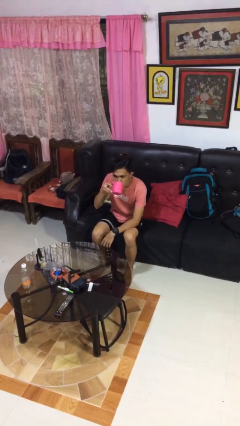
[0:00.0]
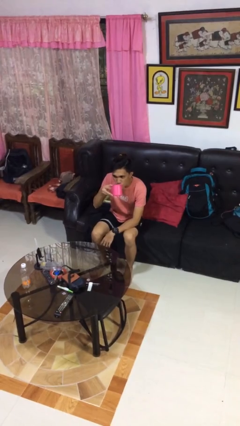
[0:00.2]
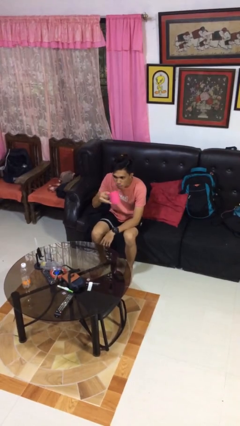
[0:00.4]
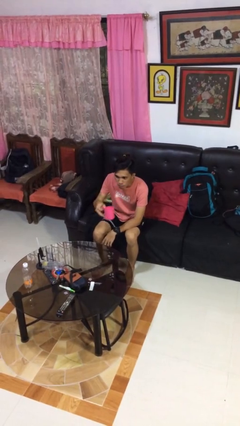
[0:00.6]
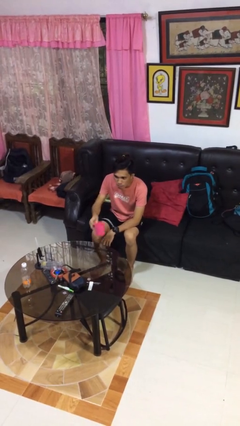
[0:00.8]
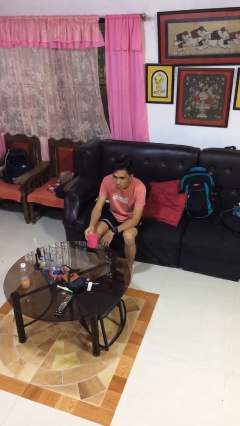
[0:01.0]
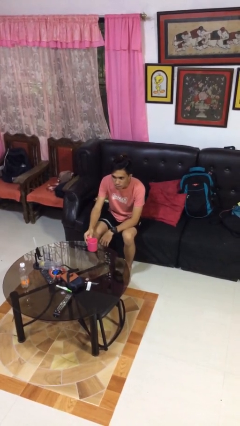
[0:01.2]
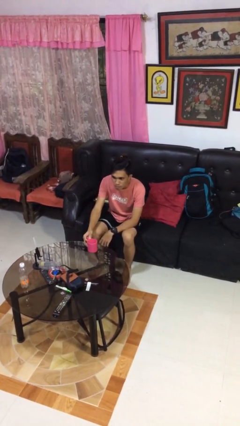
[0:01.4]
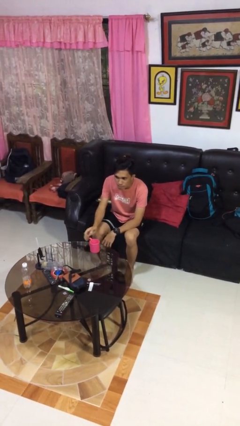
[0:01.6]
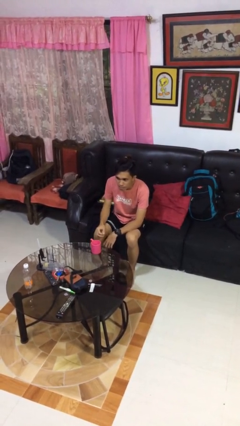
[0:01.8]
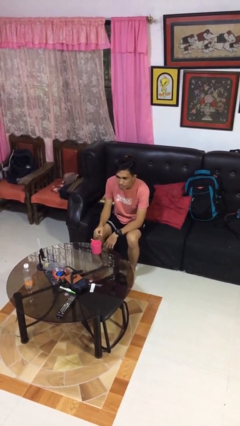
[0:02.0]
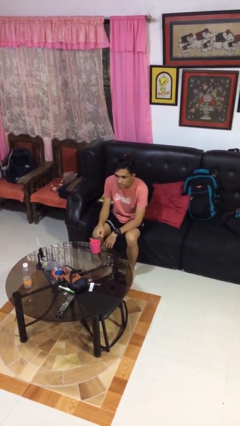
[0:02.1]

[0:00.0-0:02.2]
person puts down object on table

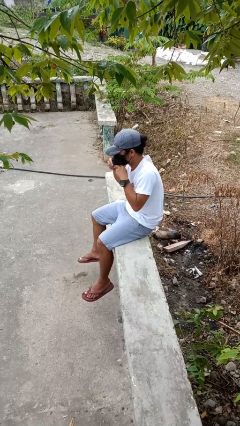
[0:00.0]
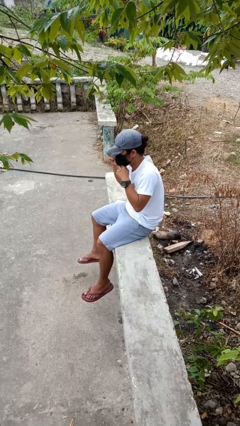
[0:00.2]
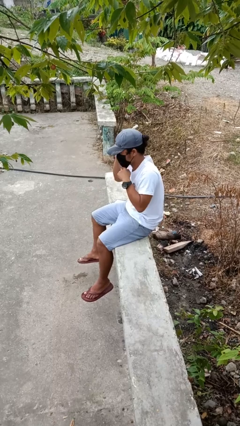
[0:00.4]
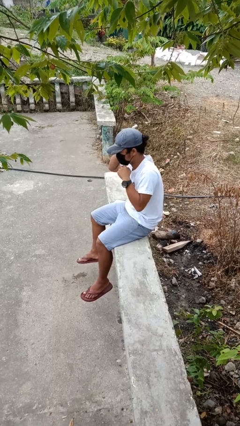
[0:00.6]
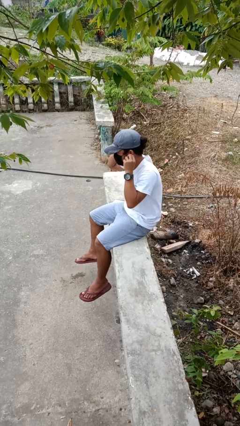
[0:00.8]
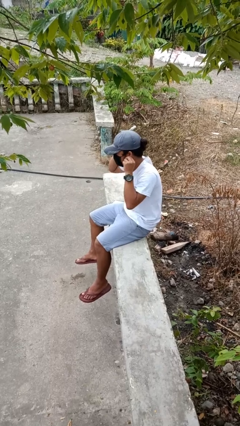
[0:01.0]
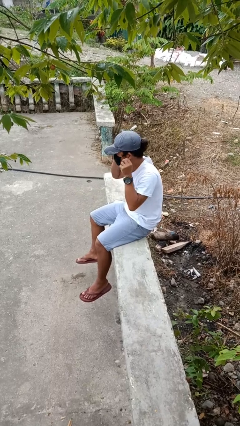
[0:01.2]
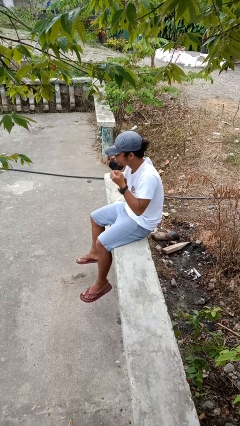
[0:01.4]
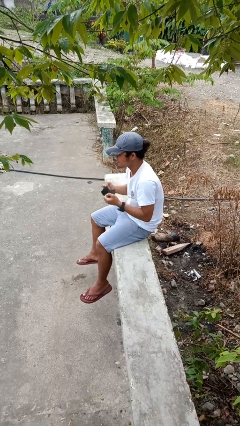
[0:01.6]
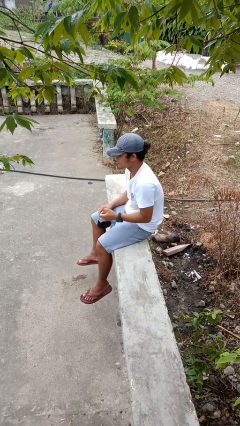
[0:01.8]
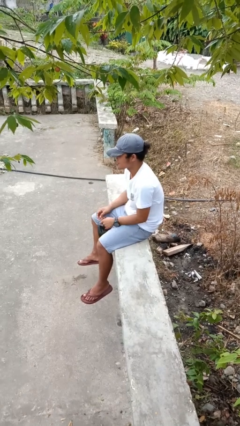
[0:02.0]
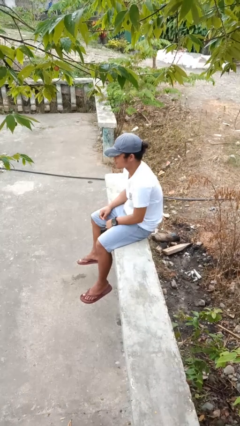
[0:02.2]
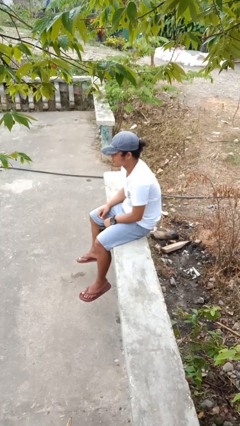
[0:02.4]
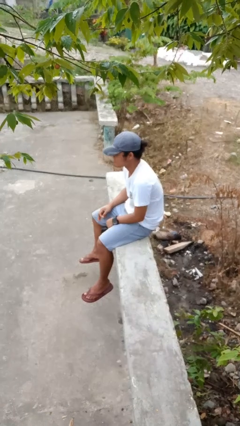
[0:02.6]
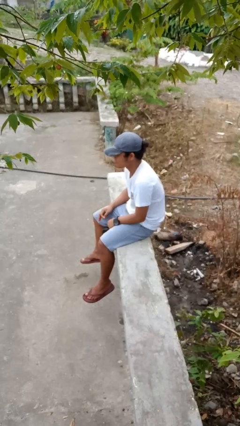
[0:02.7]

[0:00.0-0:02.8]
person takes off facemask

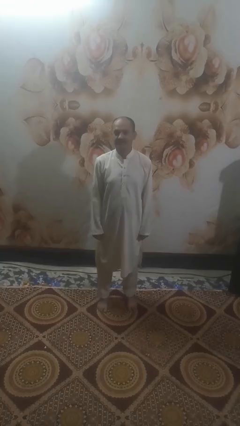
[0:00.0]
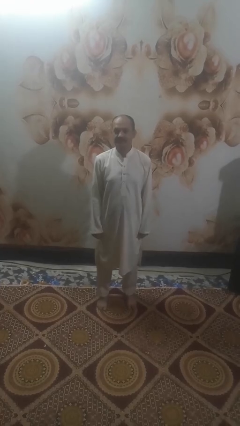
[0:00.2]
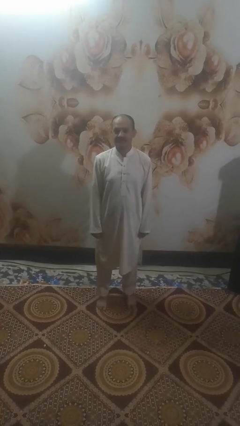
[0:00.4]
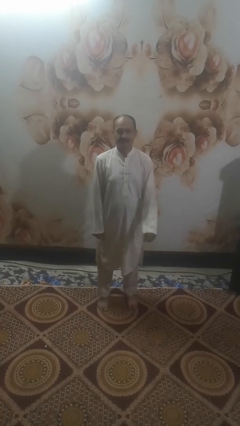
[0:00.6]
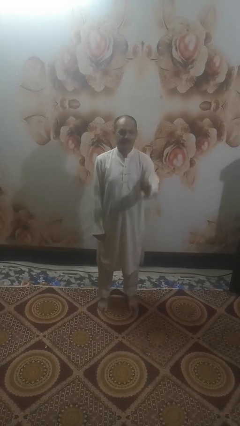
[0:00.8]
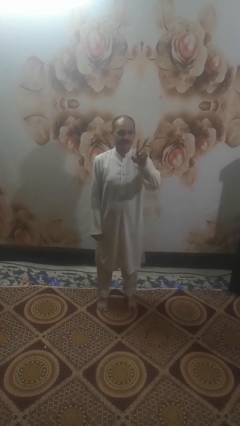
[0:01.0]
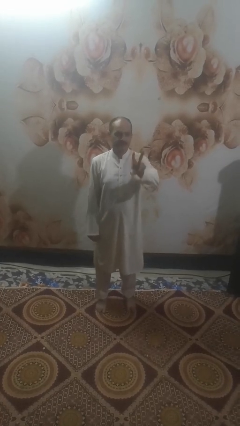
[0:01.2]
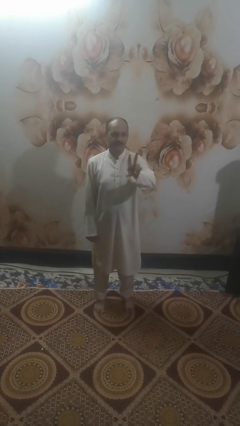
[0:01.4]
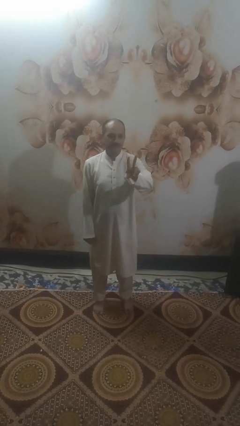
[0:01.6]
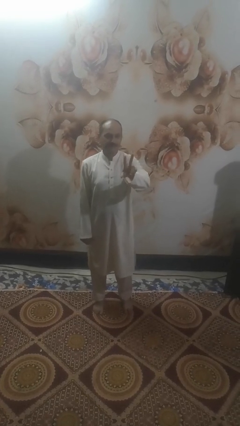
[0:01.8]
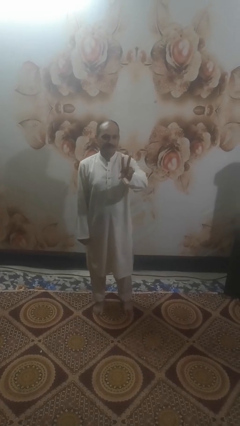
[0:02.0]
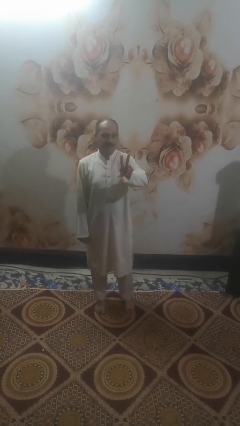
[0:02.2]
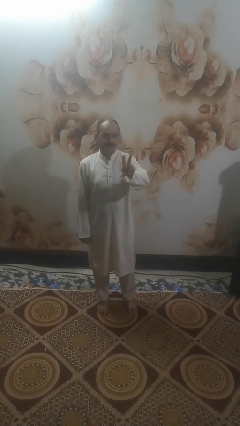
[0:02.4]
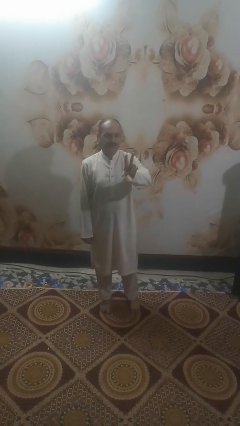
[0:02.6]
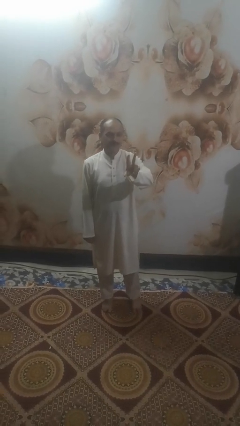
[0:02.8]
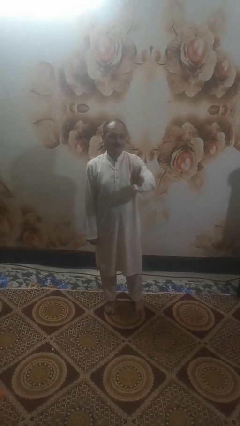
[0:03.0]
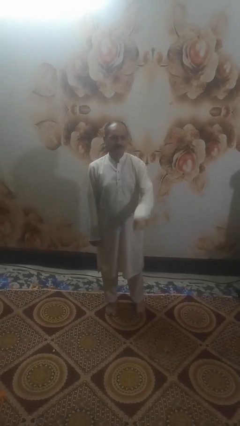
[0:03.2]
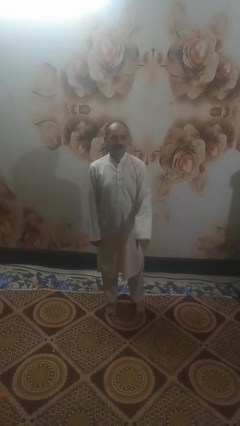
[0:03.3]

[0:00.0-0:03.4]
person gestures peace

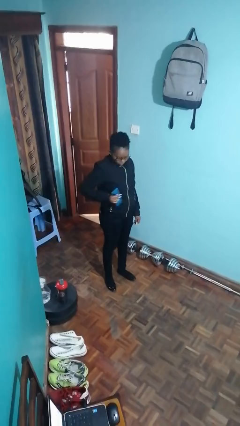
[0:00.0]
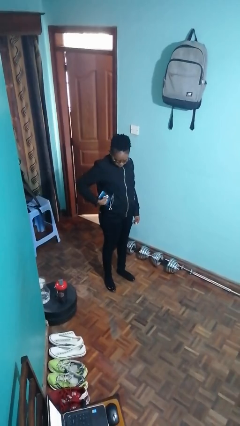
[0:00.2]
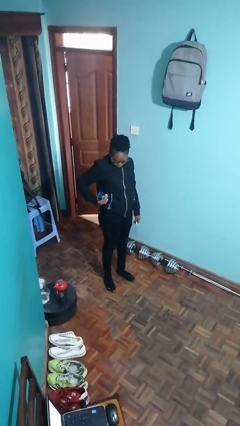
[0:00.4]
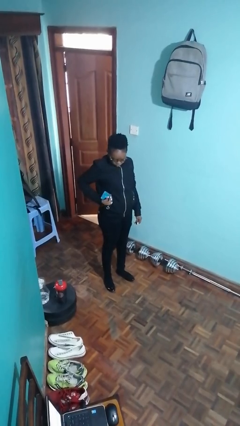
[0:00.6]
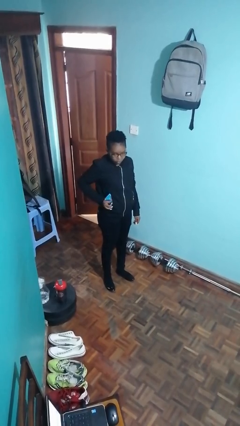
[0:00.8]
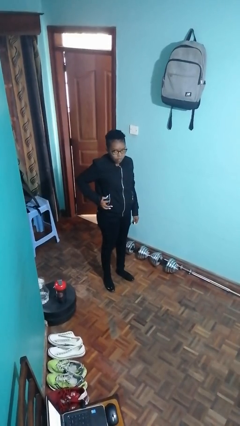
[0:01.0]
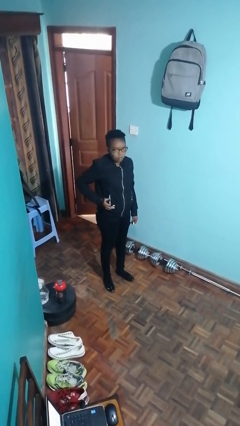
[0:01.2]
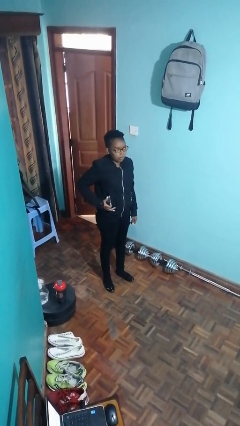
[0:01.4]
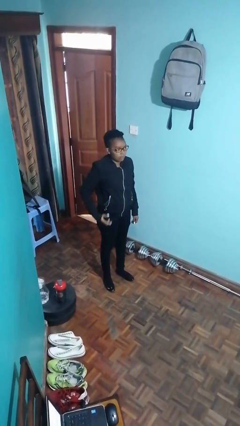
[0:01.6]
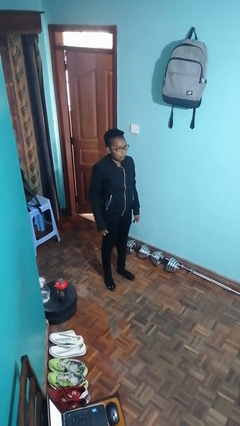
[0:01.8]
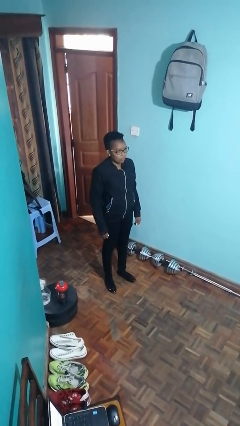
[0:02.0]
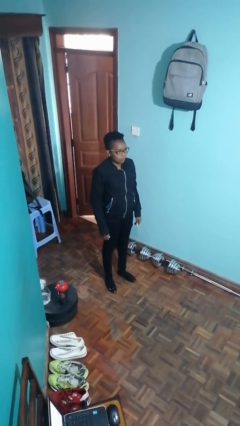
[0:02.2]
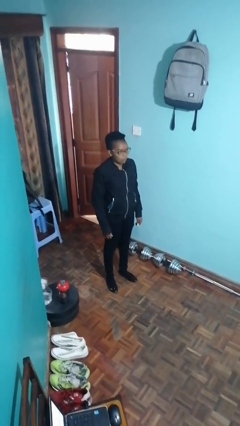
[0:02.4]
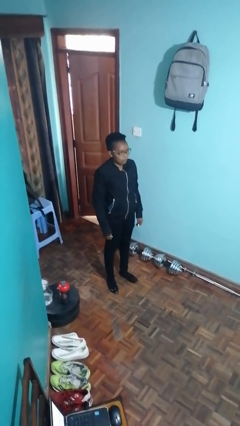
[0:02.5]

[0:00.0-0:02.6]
person puts phone into pocket

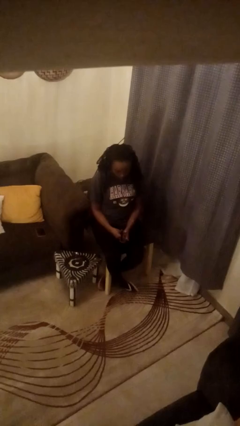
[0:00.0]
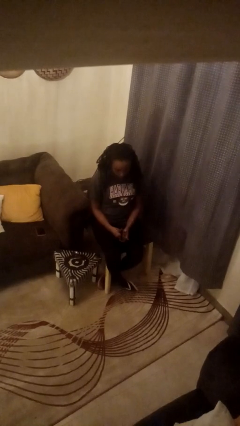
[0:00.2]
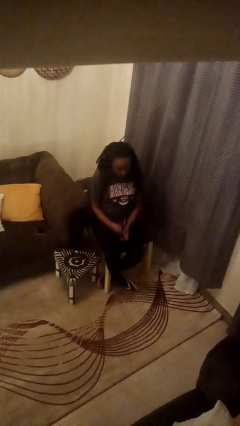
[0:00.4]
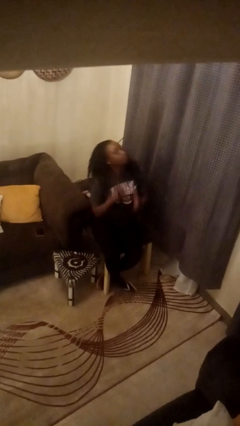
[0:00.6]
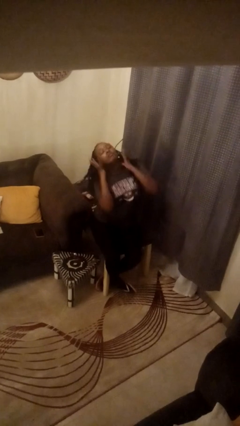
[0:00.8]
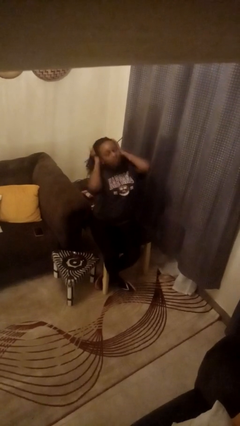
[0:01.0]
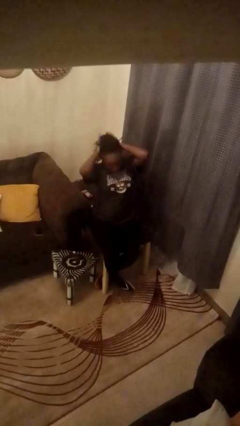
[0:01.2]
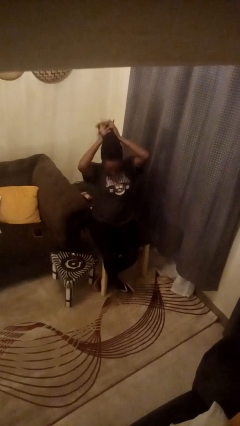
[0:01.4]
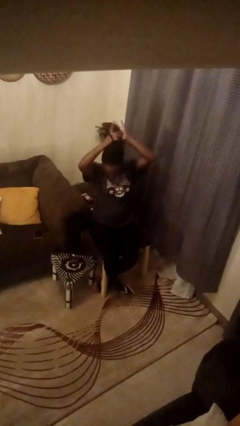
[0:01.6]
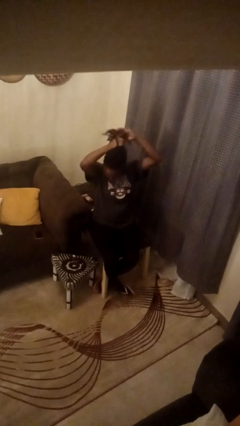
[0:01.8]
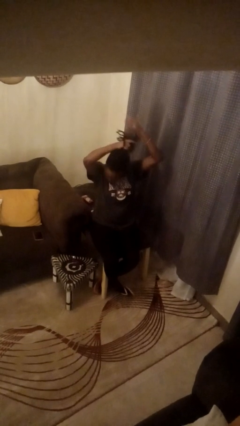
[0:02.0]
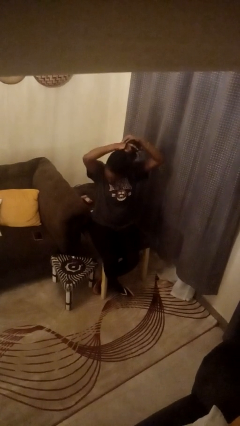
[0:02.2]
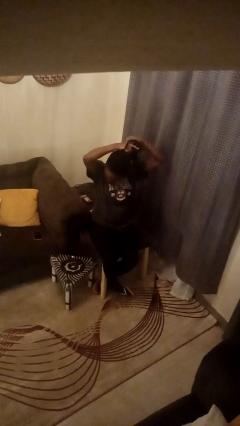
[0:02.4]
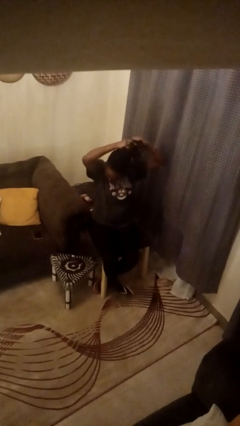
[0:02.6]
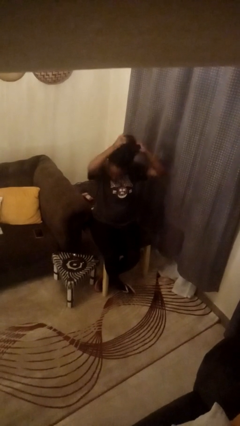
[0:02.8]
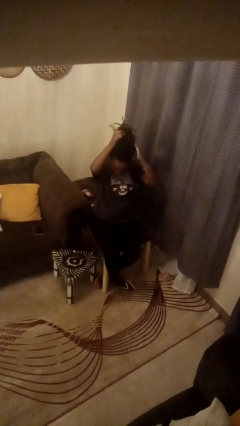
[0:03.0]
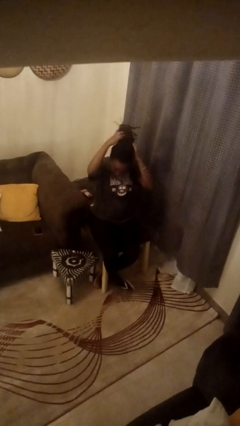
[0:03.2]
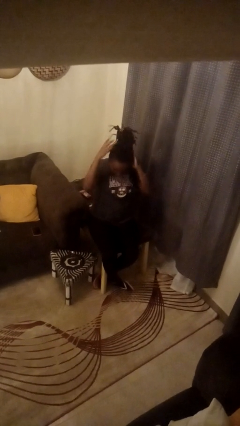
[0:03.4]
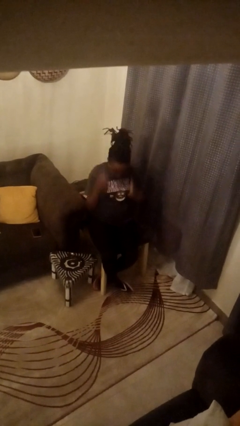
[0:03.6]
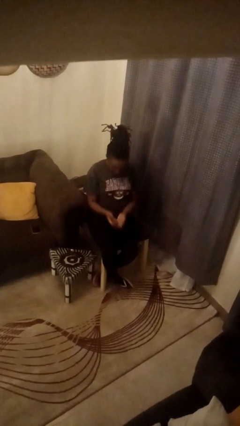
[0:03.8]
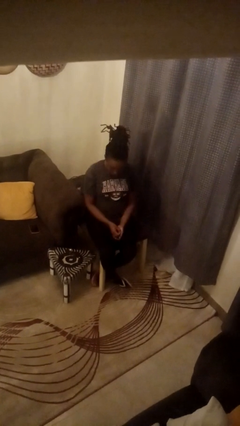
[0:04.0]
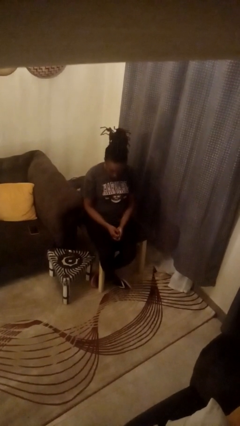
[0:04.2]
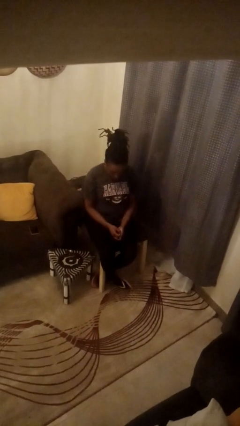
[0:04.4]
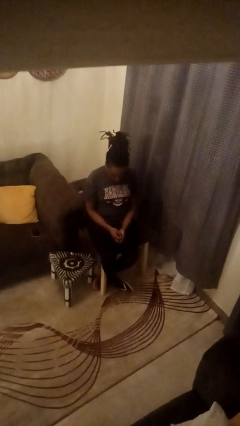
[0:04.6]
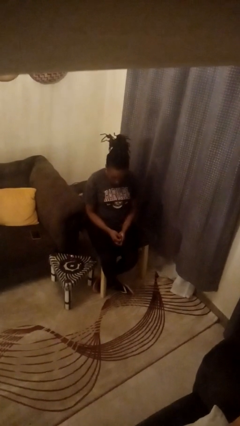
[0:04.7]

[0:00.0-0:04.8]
person puts hair in ponytail

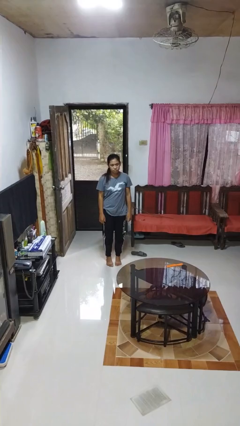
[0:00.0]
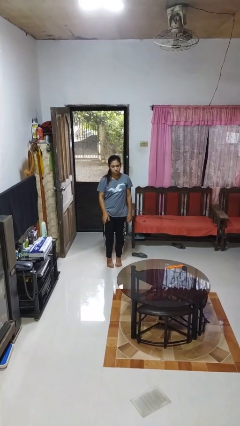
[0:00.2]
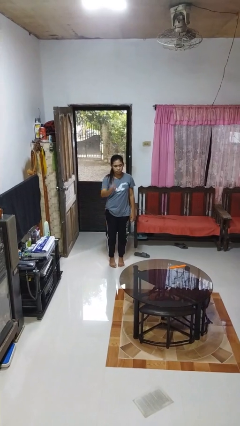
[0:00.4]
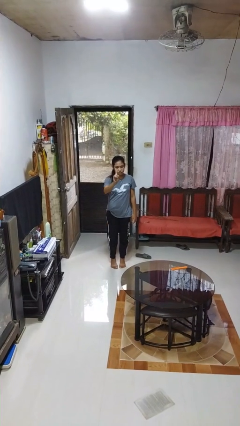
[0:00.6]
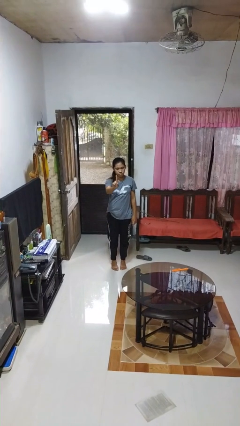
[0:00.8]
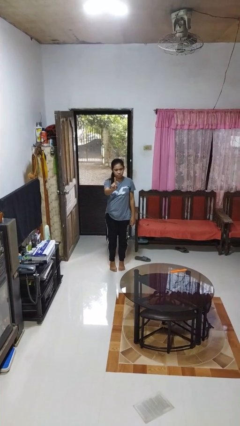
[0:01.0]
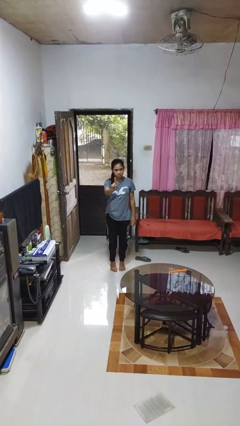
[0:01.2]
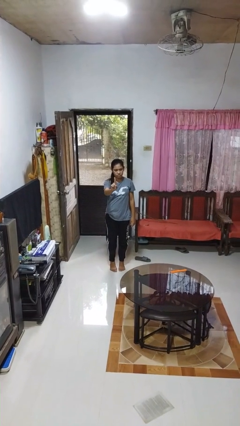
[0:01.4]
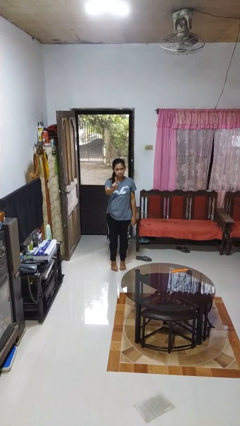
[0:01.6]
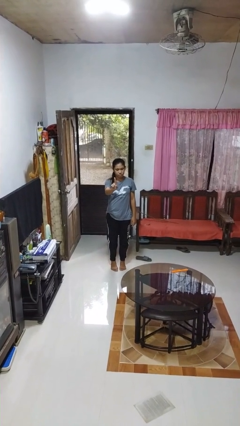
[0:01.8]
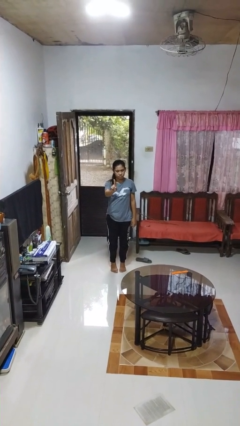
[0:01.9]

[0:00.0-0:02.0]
person gestures number one
